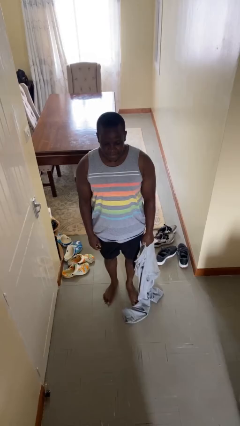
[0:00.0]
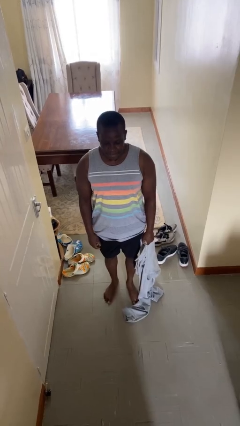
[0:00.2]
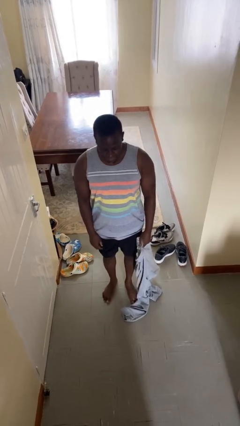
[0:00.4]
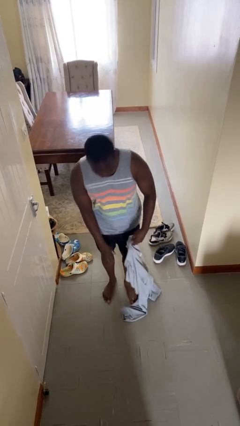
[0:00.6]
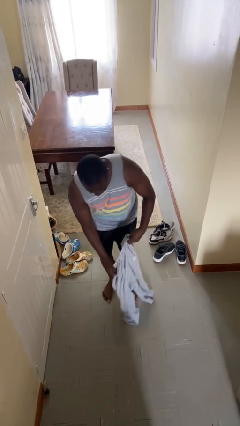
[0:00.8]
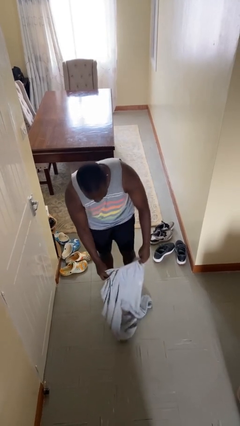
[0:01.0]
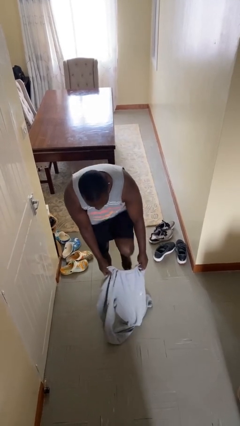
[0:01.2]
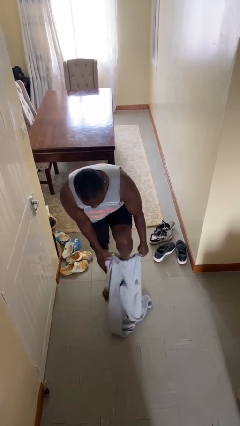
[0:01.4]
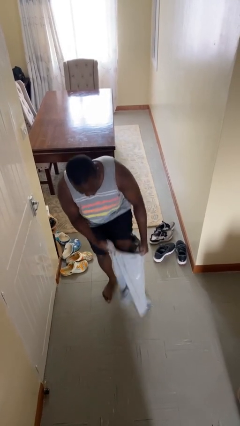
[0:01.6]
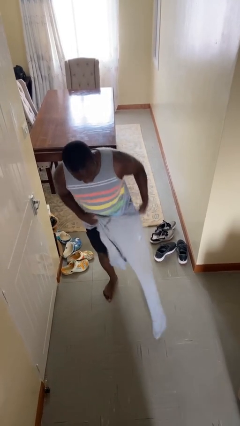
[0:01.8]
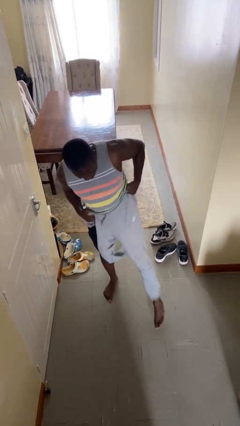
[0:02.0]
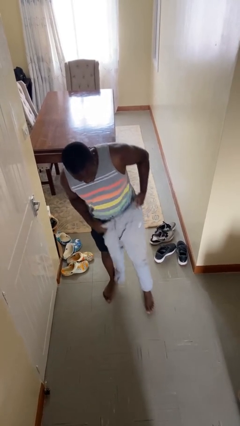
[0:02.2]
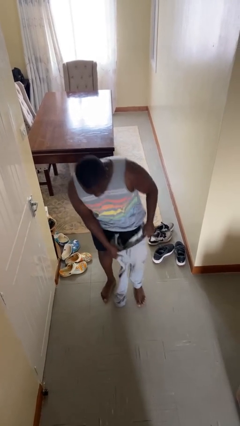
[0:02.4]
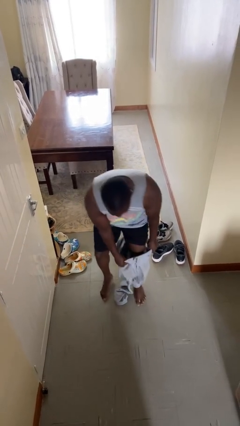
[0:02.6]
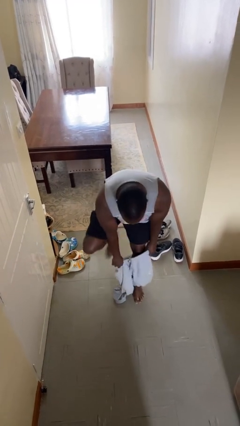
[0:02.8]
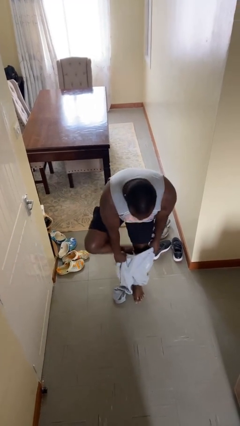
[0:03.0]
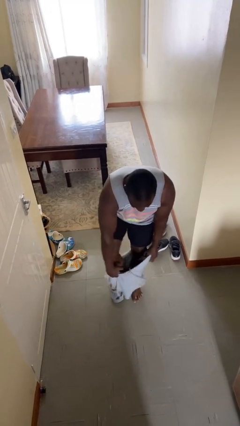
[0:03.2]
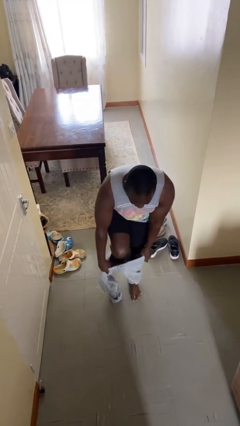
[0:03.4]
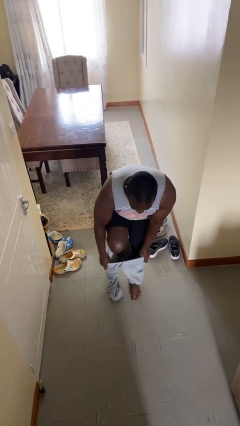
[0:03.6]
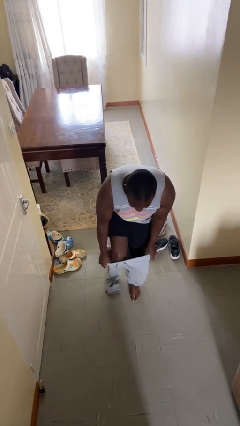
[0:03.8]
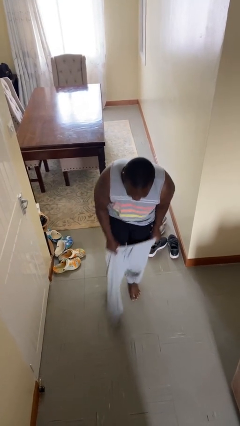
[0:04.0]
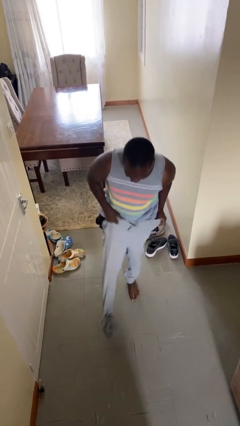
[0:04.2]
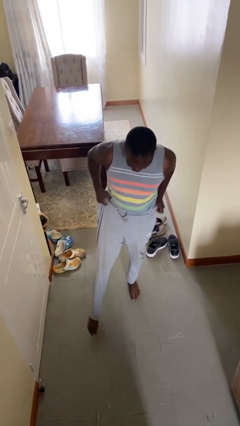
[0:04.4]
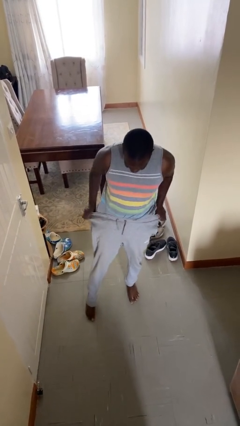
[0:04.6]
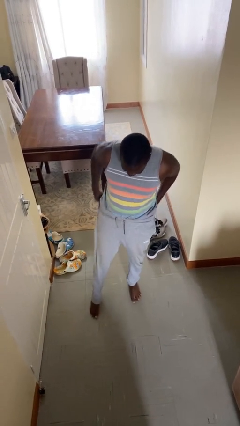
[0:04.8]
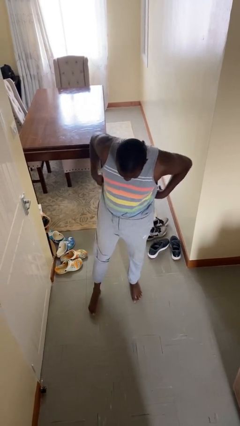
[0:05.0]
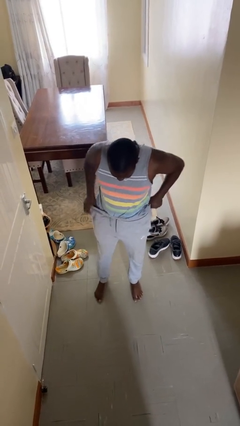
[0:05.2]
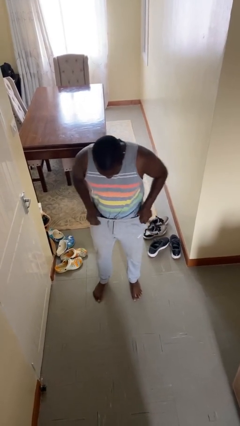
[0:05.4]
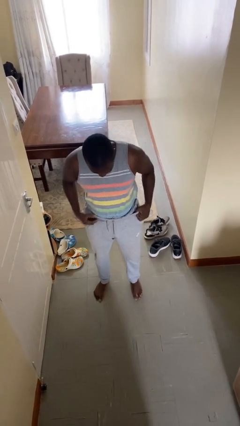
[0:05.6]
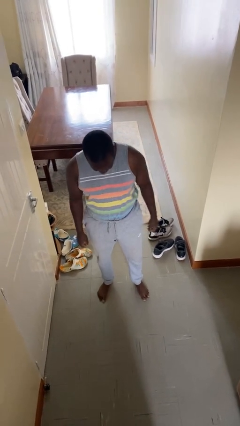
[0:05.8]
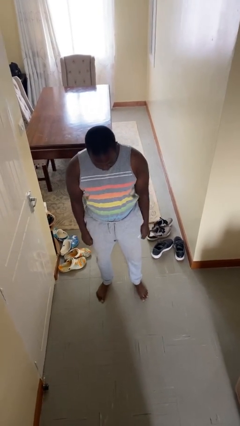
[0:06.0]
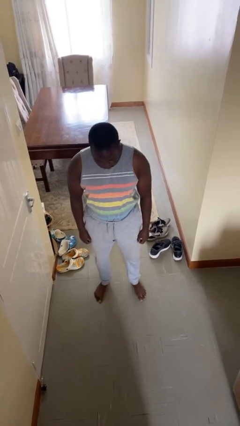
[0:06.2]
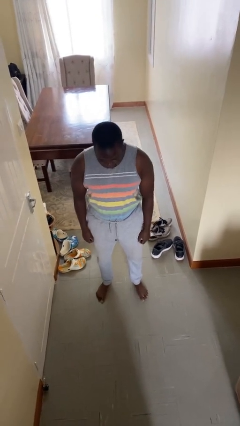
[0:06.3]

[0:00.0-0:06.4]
person puts on pants

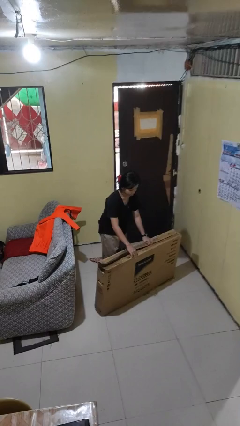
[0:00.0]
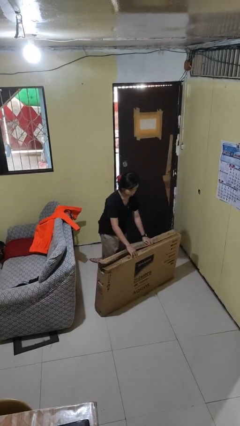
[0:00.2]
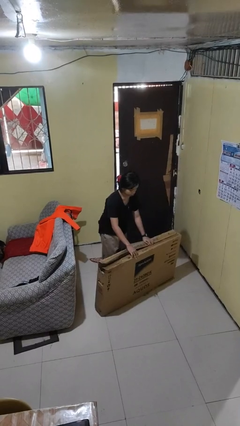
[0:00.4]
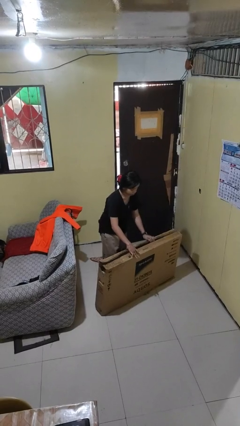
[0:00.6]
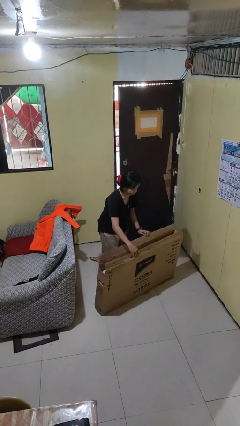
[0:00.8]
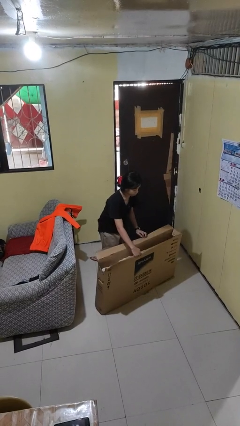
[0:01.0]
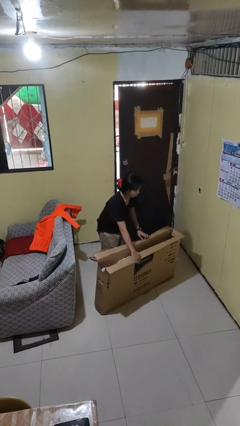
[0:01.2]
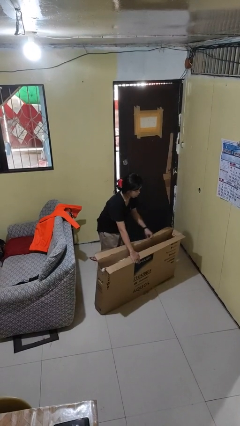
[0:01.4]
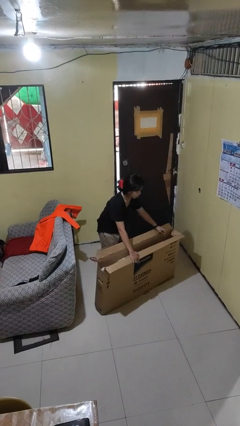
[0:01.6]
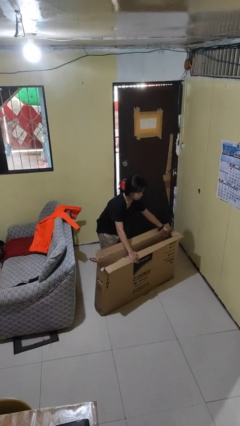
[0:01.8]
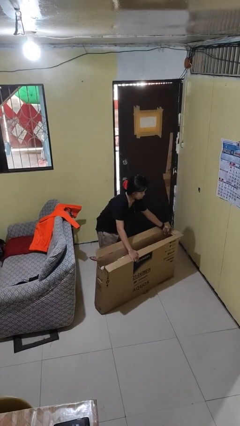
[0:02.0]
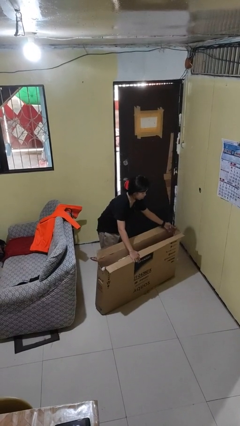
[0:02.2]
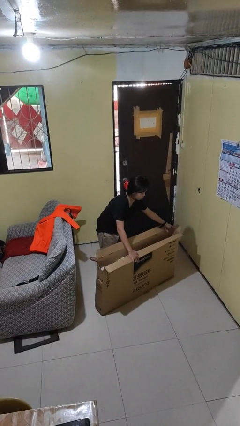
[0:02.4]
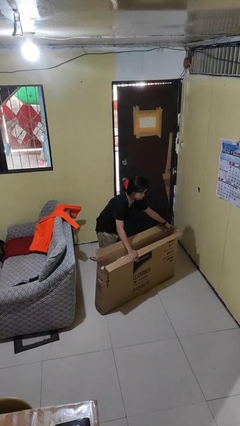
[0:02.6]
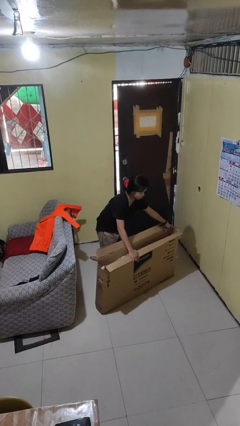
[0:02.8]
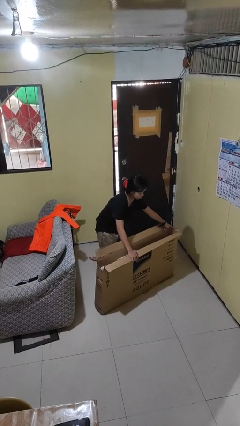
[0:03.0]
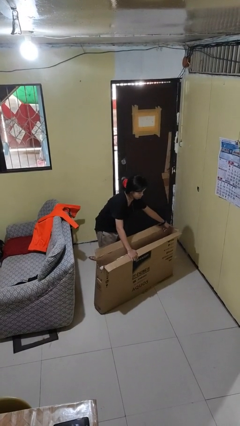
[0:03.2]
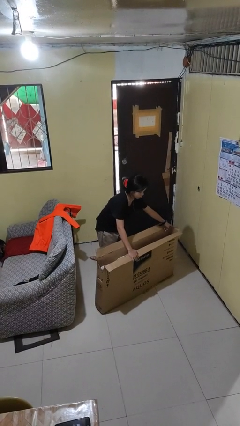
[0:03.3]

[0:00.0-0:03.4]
person opens box

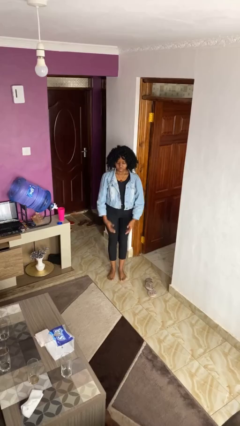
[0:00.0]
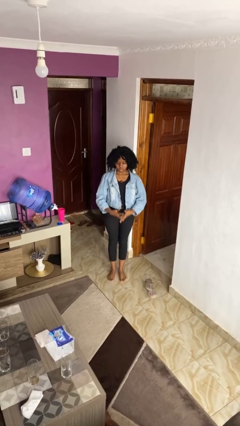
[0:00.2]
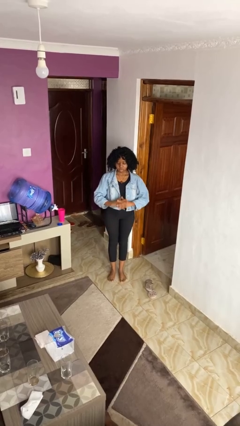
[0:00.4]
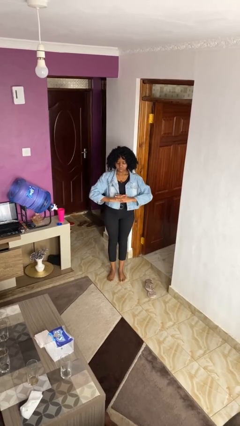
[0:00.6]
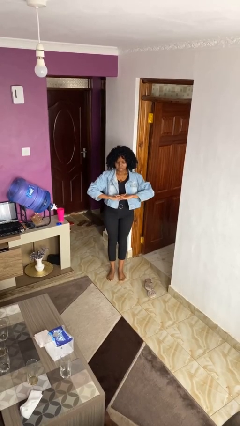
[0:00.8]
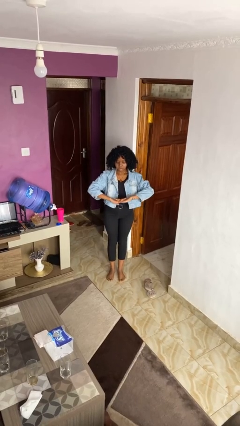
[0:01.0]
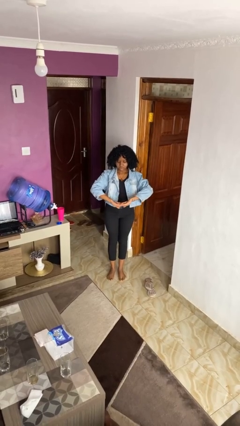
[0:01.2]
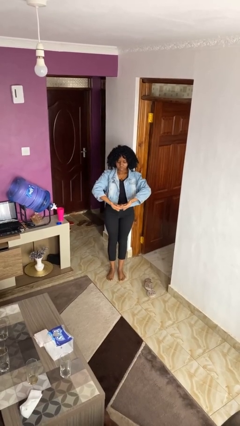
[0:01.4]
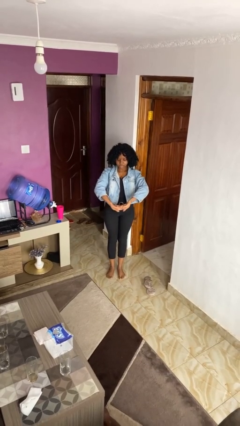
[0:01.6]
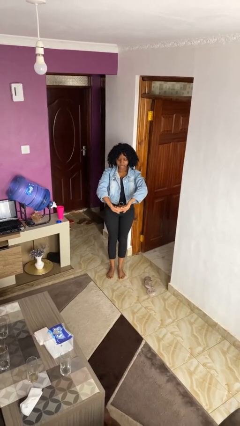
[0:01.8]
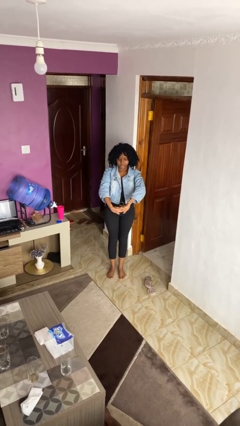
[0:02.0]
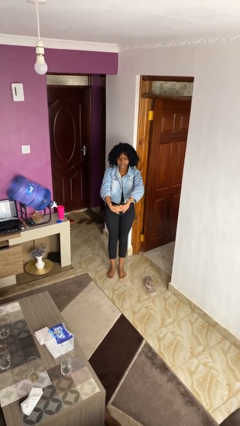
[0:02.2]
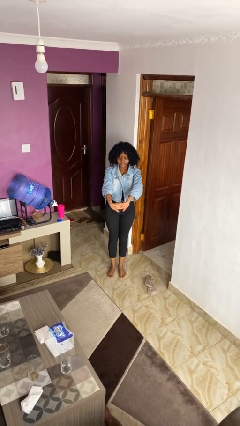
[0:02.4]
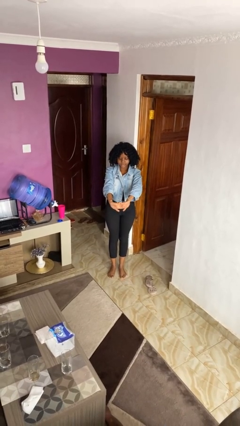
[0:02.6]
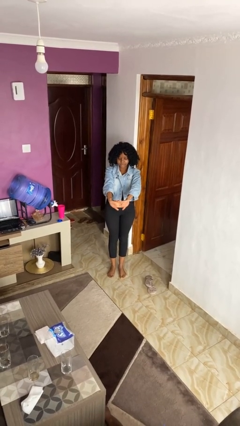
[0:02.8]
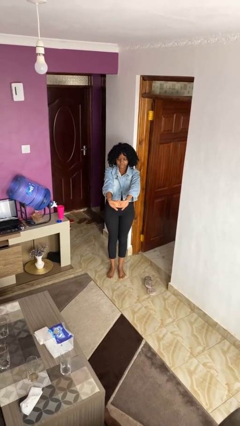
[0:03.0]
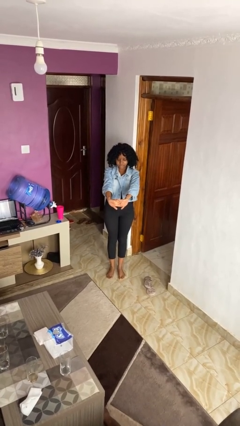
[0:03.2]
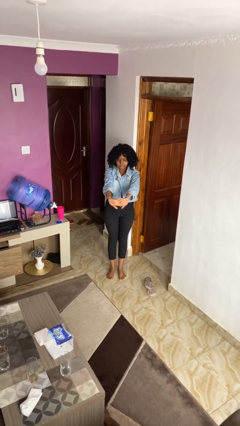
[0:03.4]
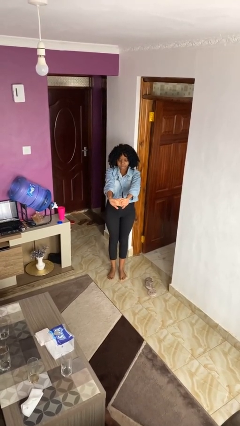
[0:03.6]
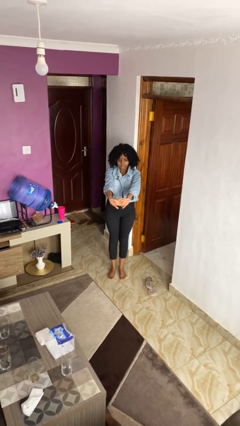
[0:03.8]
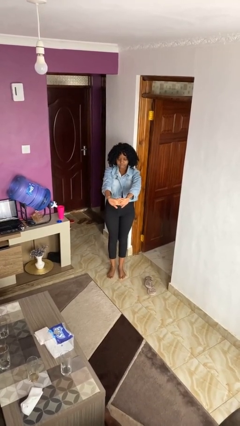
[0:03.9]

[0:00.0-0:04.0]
person cracks knuckles

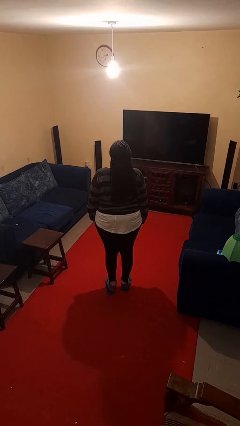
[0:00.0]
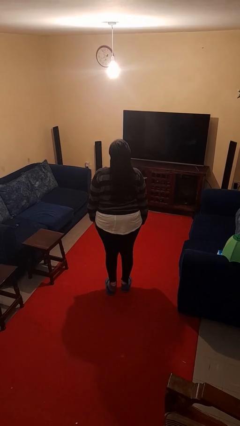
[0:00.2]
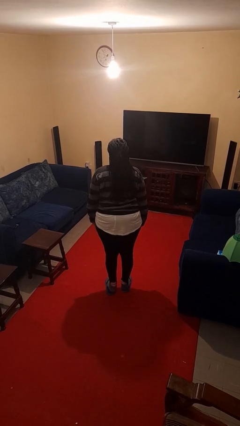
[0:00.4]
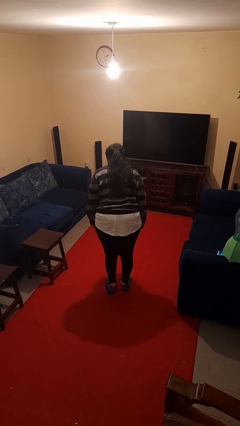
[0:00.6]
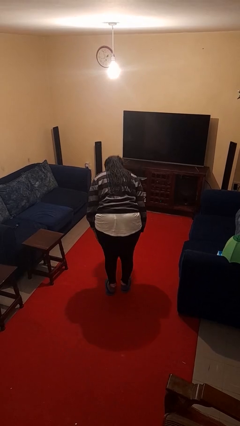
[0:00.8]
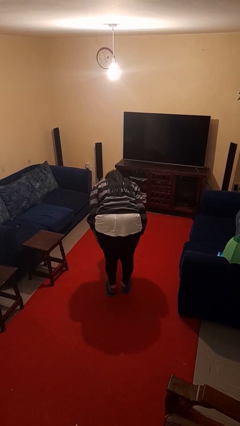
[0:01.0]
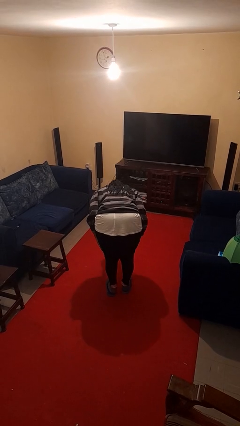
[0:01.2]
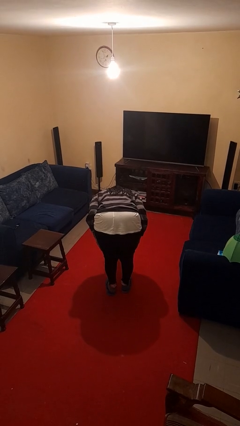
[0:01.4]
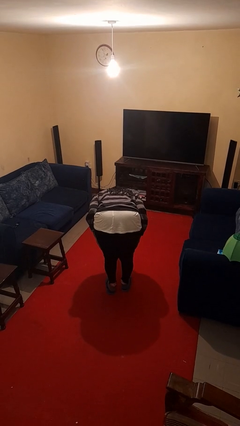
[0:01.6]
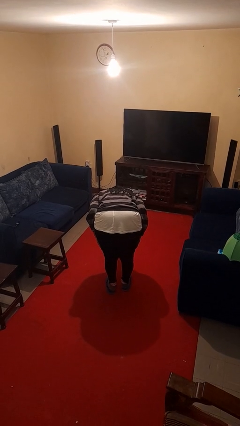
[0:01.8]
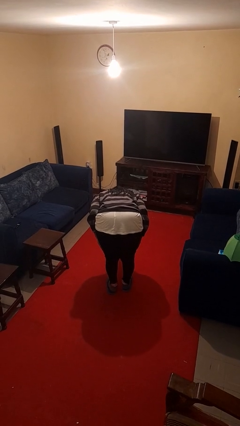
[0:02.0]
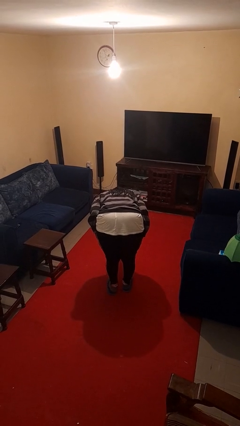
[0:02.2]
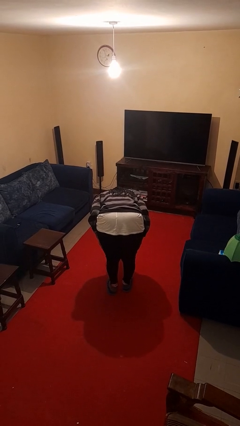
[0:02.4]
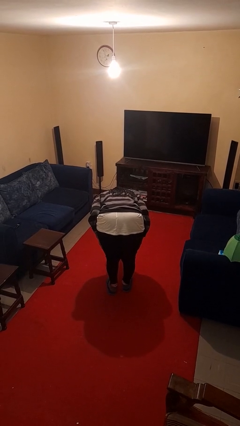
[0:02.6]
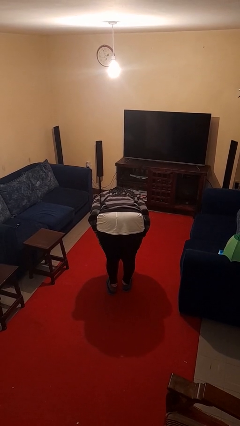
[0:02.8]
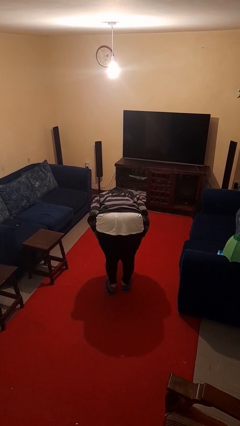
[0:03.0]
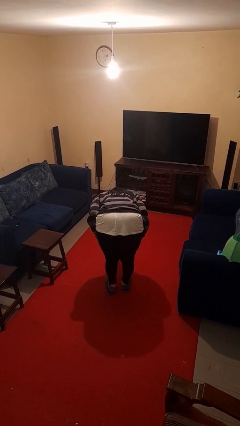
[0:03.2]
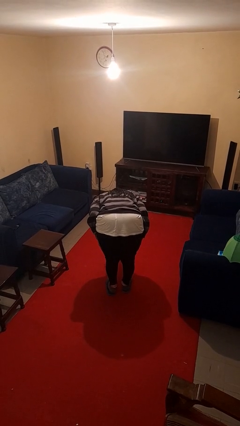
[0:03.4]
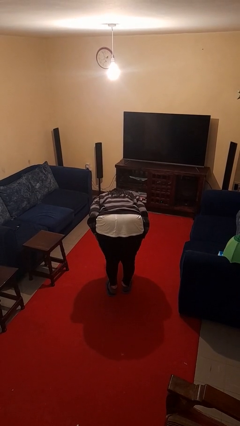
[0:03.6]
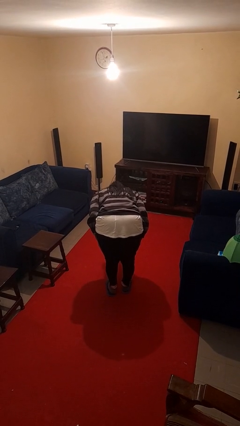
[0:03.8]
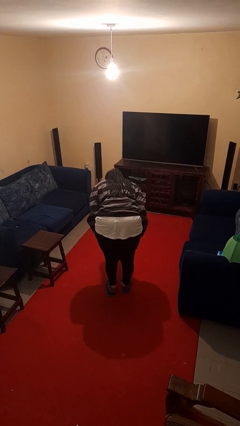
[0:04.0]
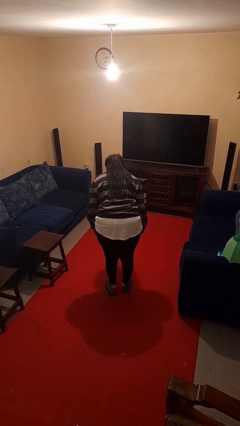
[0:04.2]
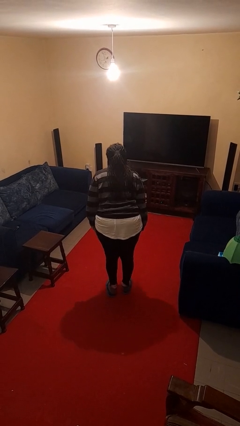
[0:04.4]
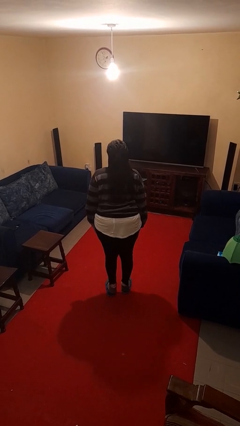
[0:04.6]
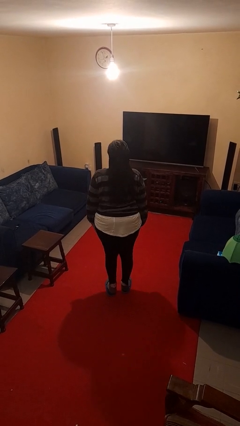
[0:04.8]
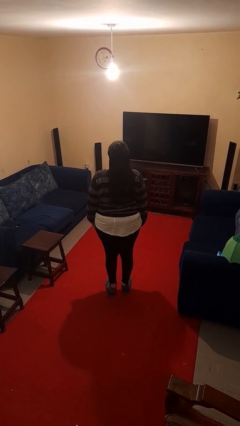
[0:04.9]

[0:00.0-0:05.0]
person bows
